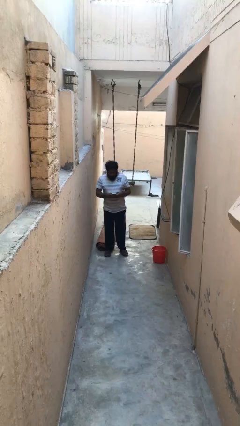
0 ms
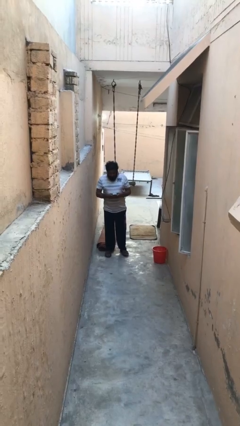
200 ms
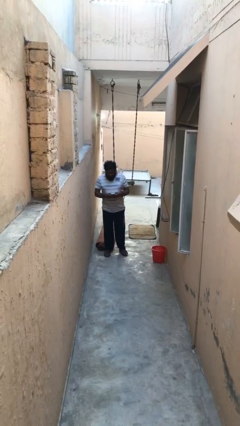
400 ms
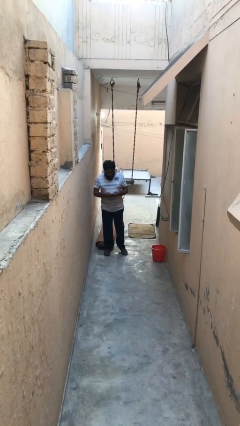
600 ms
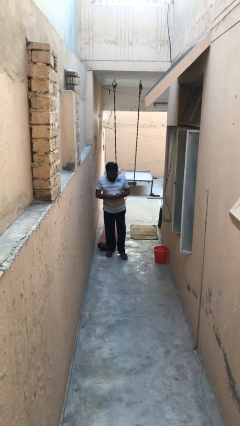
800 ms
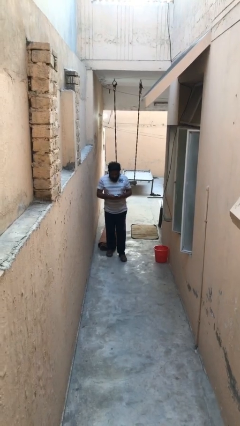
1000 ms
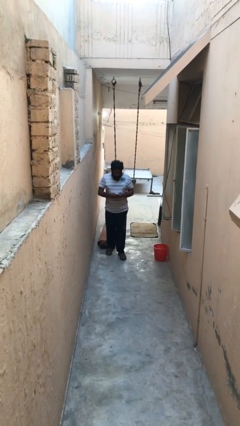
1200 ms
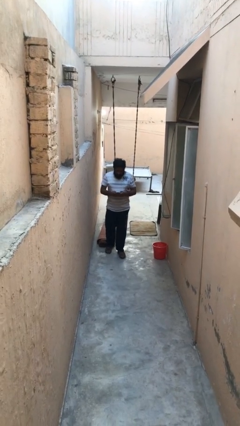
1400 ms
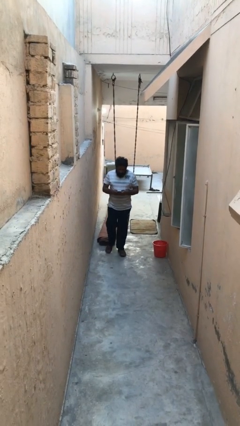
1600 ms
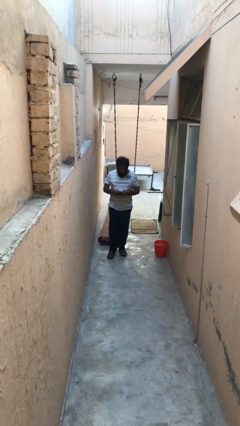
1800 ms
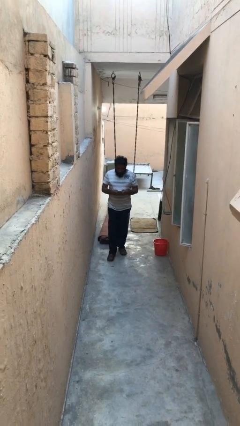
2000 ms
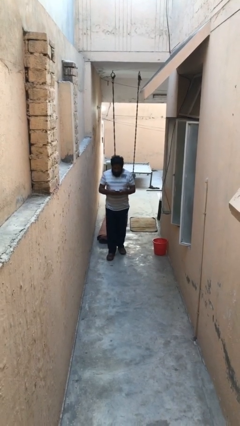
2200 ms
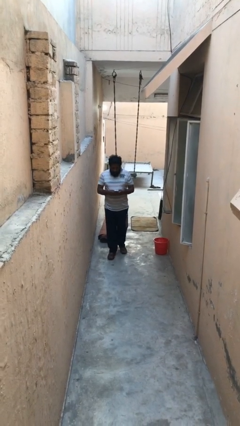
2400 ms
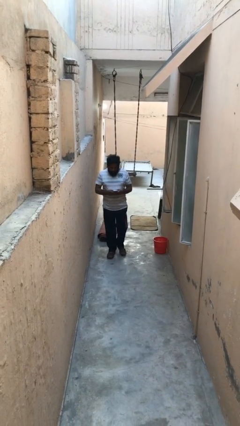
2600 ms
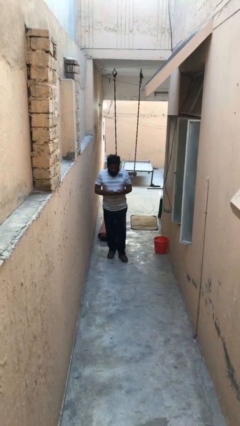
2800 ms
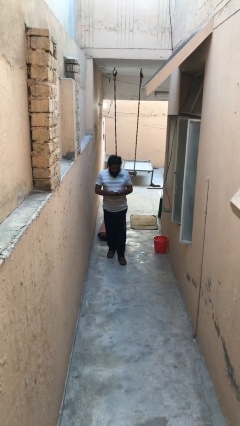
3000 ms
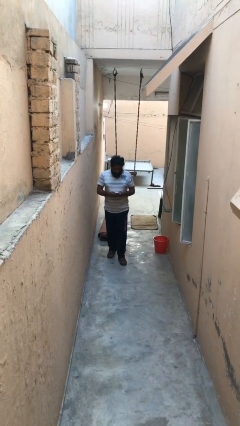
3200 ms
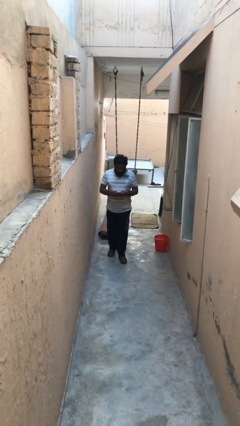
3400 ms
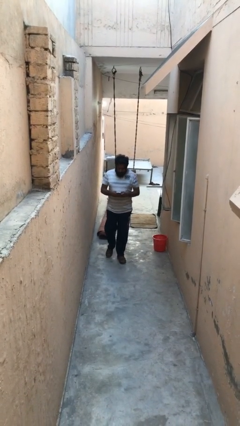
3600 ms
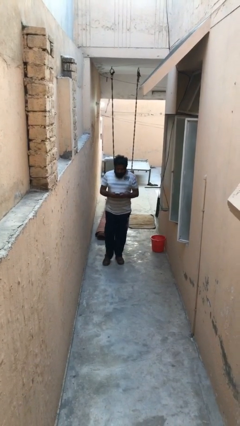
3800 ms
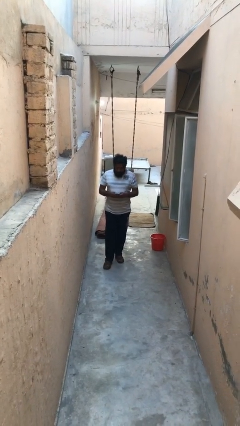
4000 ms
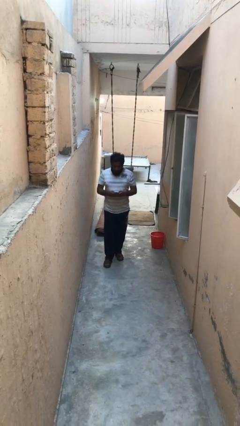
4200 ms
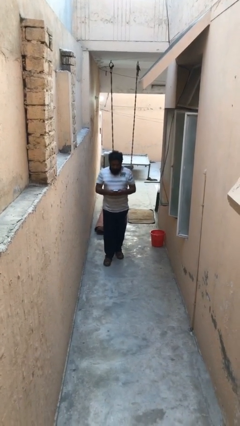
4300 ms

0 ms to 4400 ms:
person texts on phone

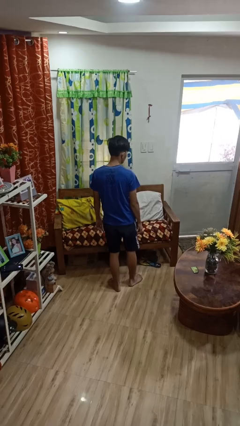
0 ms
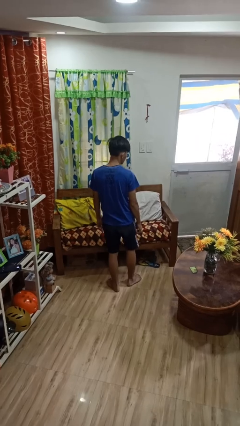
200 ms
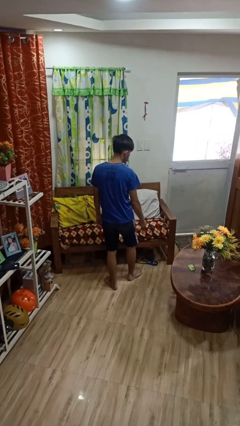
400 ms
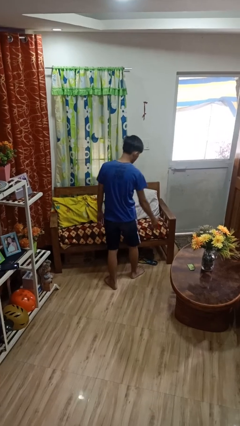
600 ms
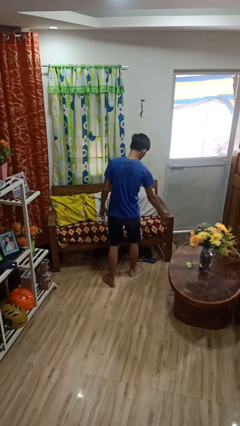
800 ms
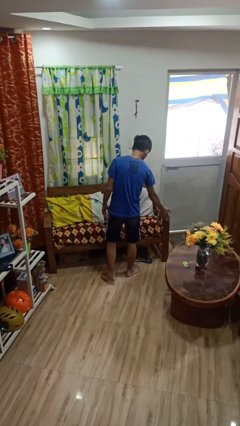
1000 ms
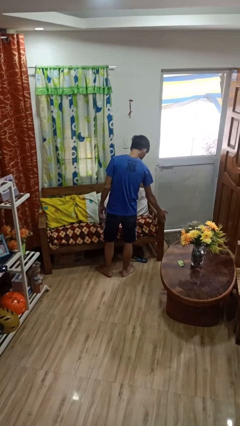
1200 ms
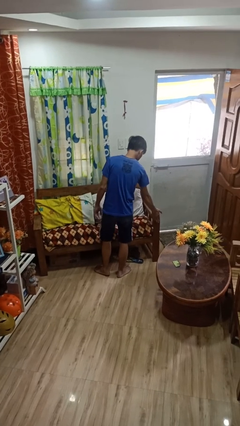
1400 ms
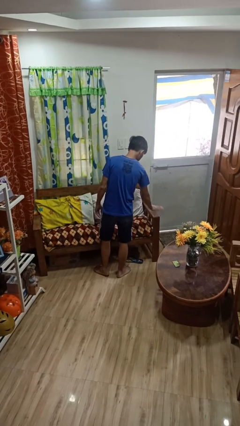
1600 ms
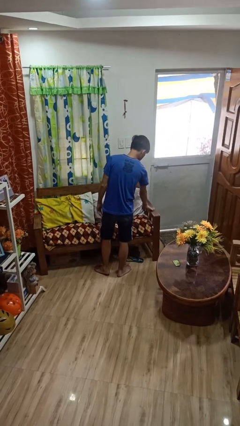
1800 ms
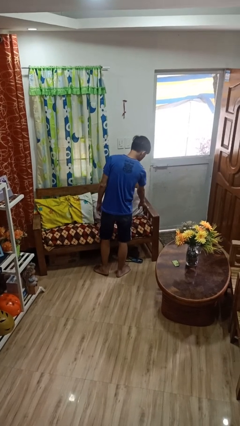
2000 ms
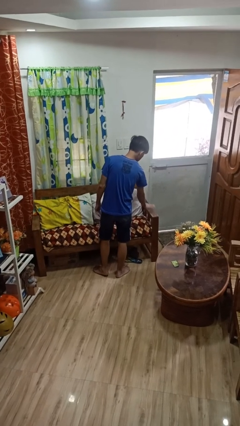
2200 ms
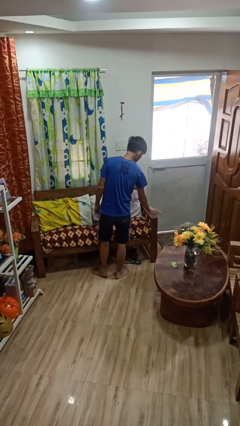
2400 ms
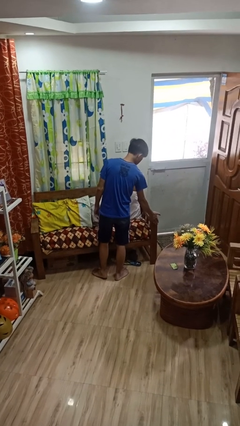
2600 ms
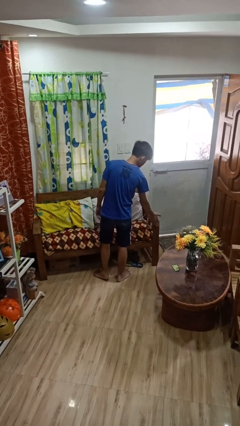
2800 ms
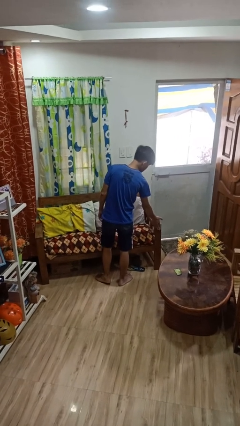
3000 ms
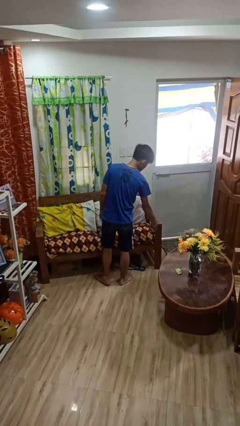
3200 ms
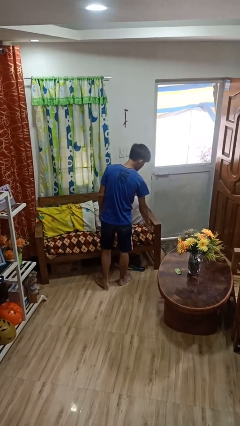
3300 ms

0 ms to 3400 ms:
person taps object with finger

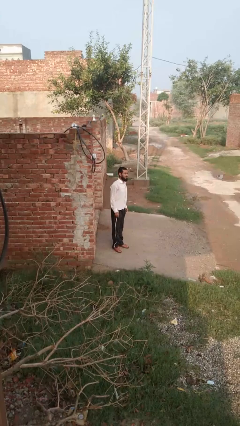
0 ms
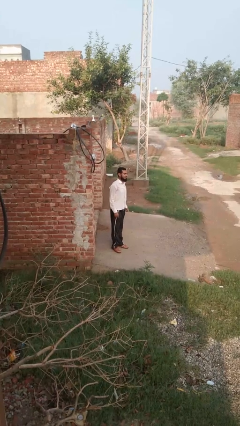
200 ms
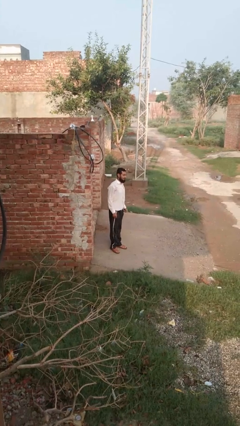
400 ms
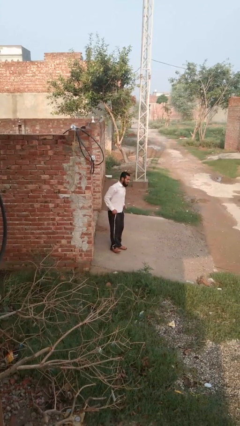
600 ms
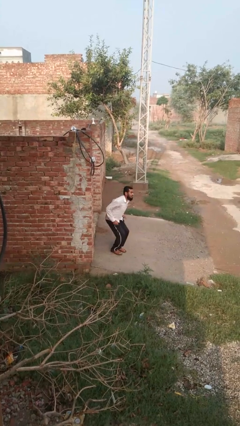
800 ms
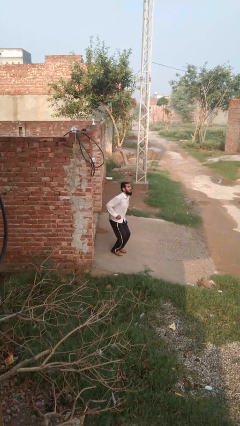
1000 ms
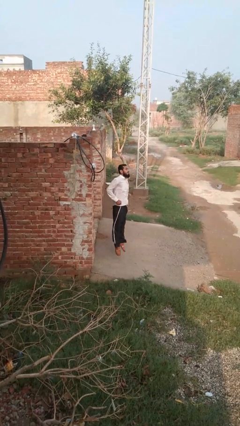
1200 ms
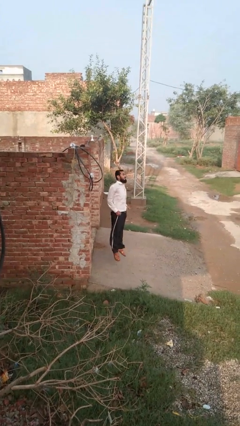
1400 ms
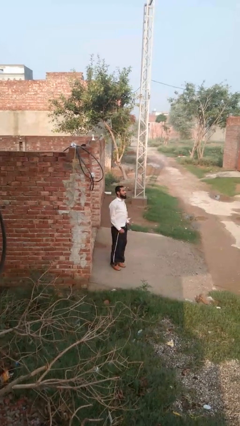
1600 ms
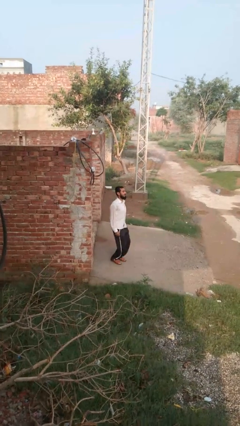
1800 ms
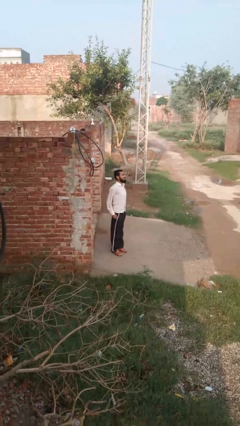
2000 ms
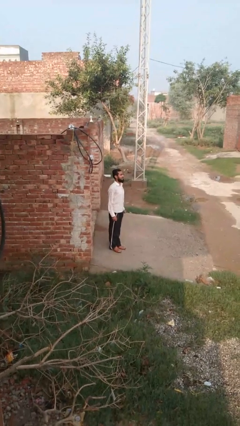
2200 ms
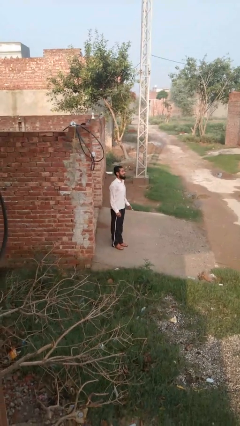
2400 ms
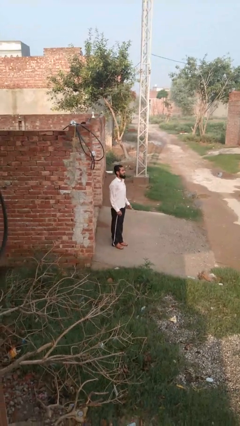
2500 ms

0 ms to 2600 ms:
person jumps

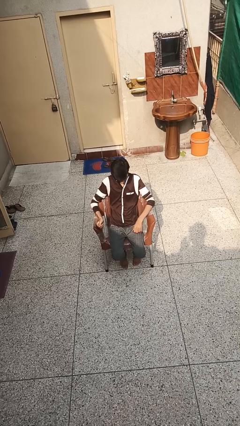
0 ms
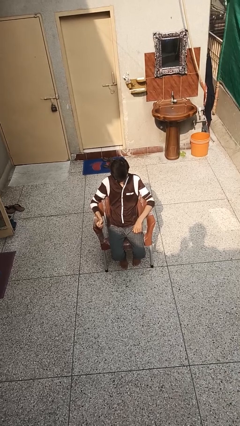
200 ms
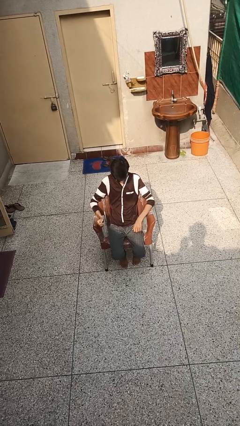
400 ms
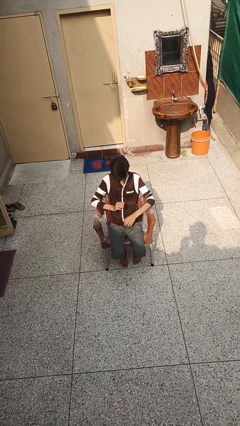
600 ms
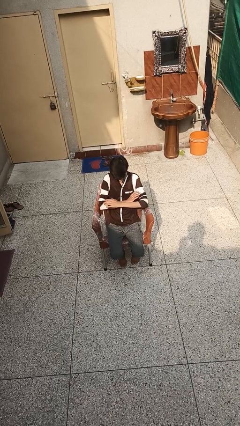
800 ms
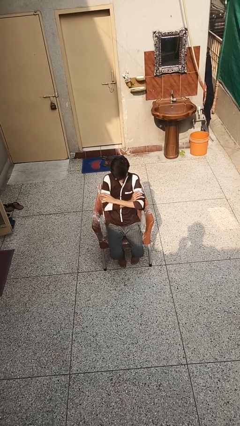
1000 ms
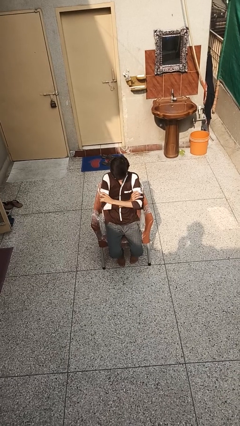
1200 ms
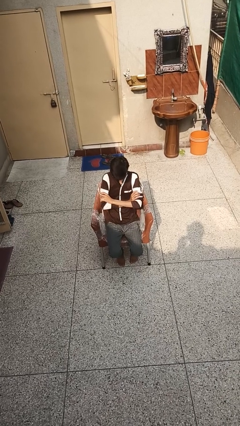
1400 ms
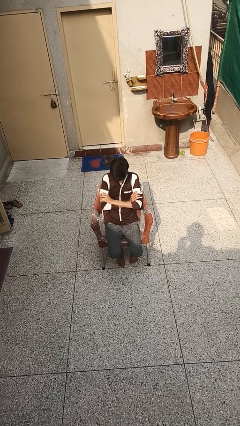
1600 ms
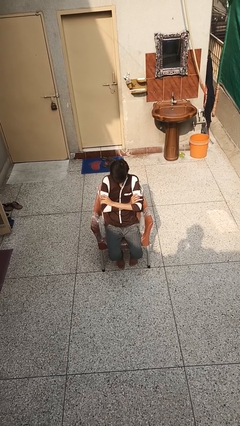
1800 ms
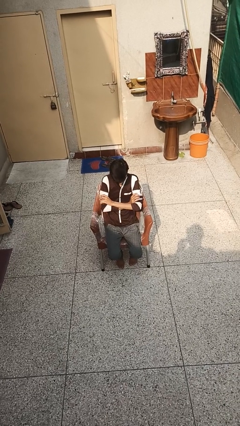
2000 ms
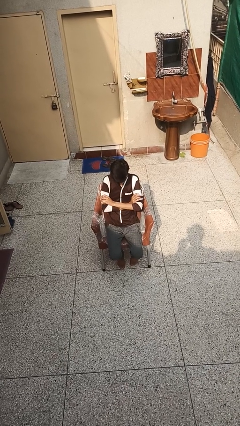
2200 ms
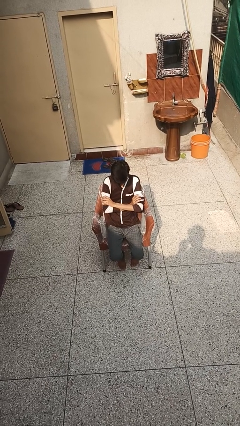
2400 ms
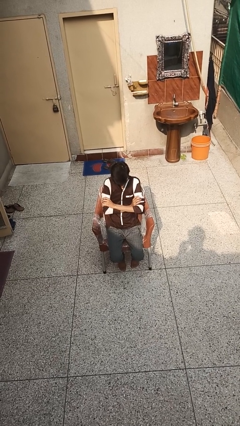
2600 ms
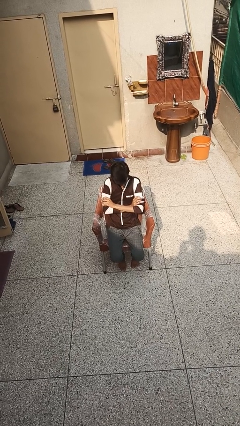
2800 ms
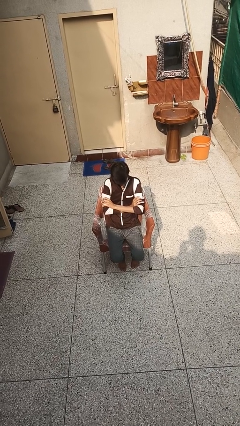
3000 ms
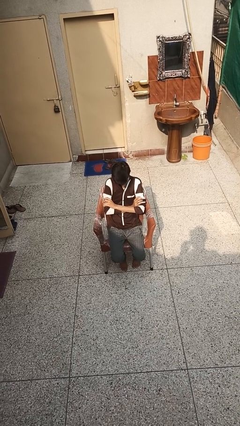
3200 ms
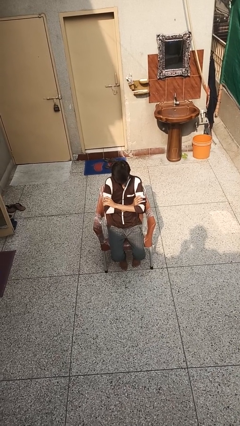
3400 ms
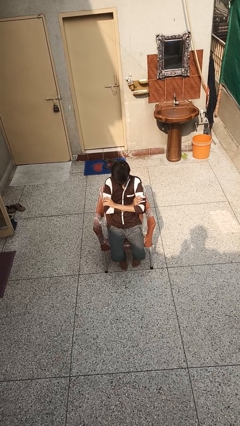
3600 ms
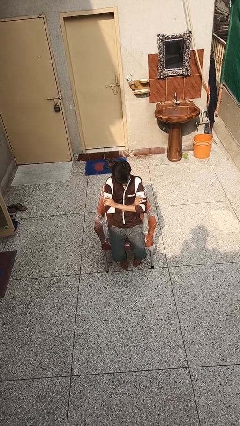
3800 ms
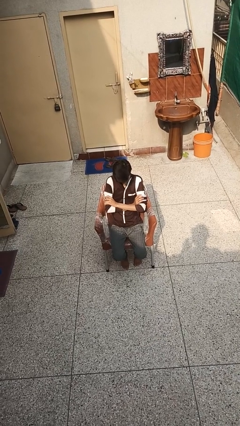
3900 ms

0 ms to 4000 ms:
person crosses arms

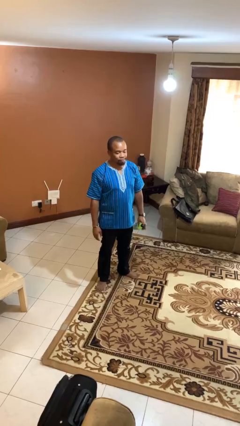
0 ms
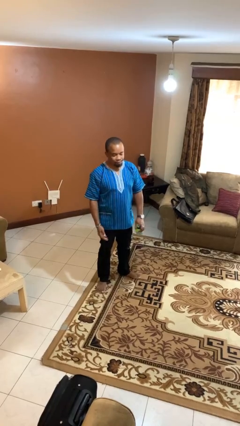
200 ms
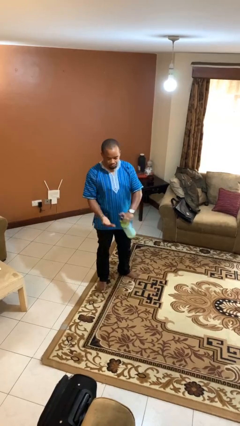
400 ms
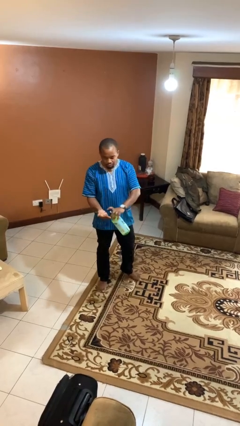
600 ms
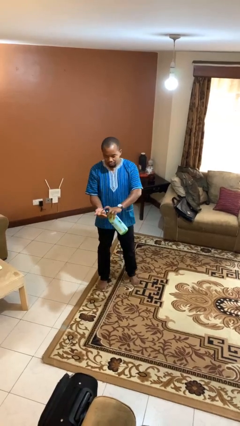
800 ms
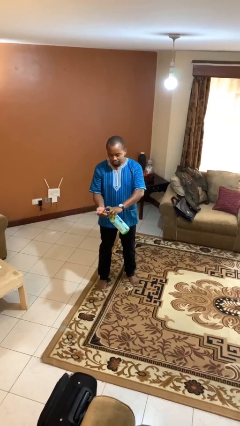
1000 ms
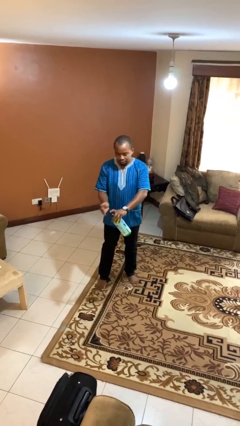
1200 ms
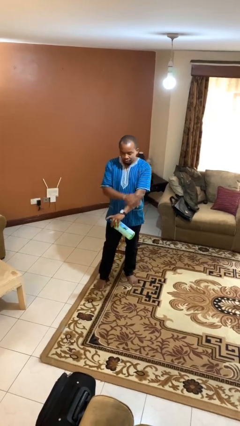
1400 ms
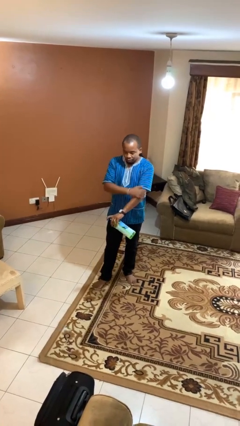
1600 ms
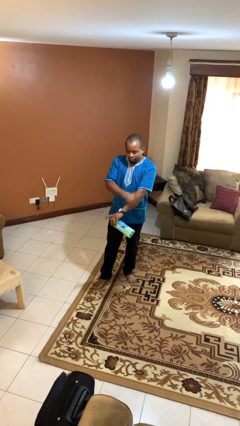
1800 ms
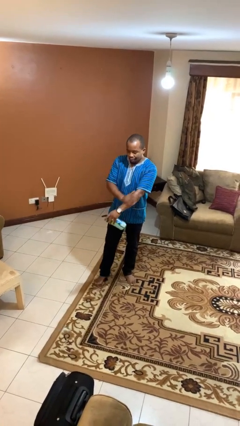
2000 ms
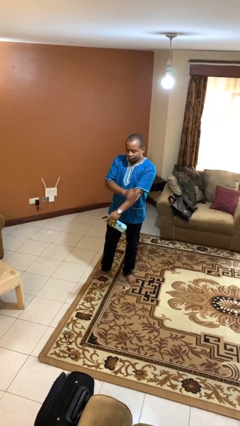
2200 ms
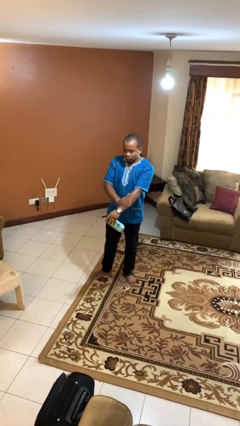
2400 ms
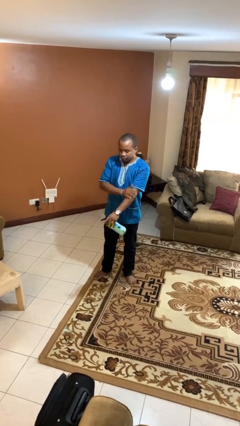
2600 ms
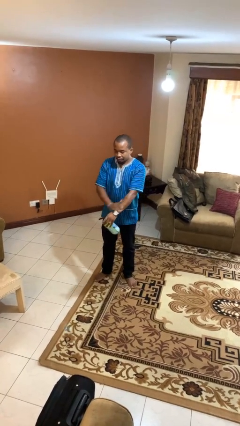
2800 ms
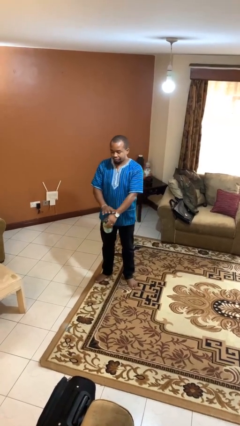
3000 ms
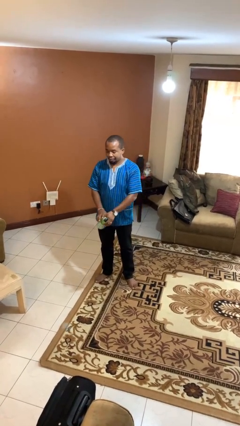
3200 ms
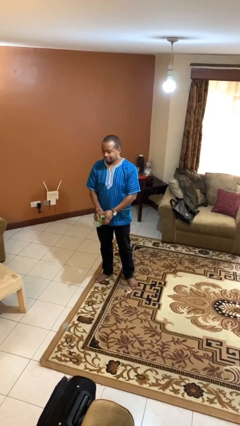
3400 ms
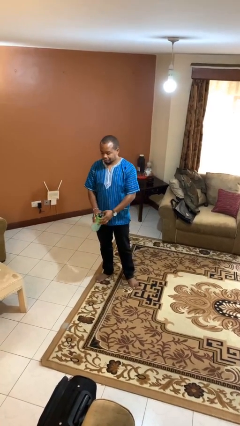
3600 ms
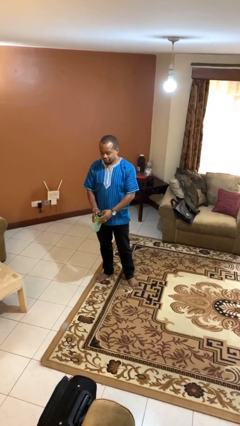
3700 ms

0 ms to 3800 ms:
person applies sunscreen
